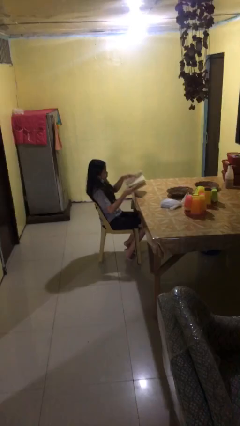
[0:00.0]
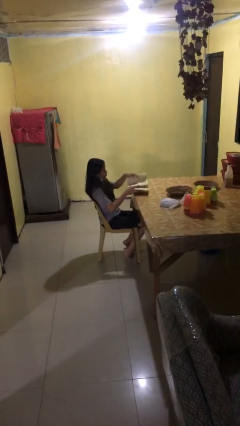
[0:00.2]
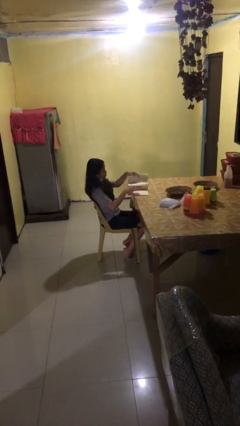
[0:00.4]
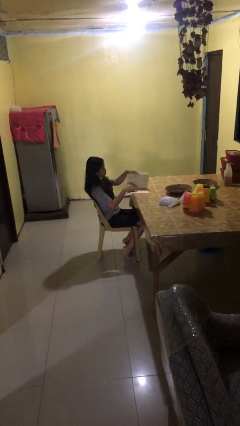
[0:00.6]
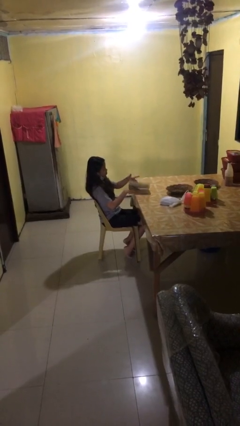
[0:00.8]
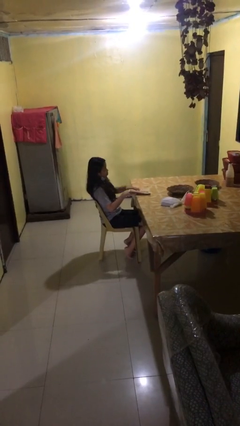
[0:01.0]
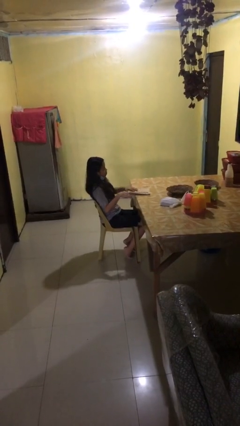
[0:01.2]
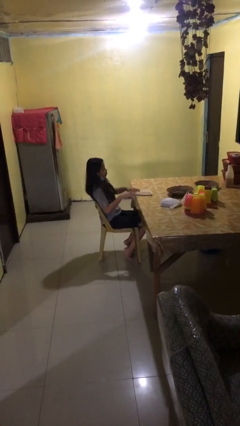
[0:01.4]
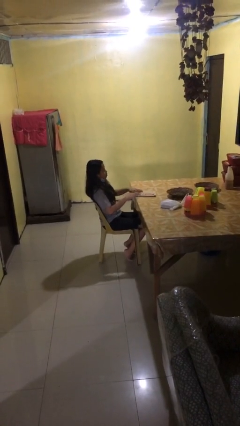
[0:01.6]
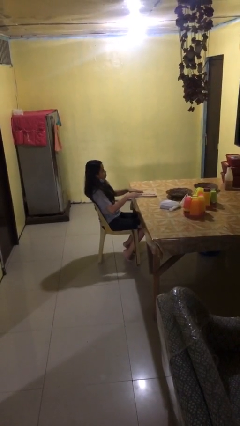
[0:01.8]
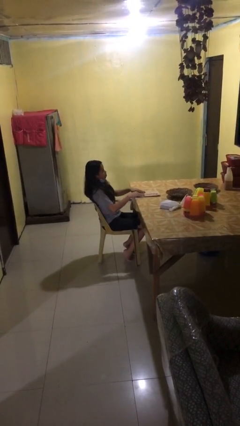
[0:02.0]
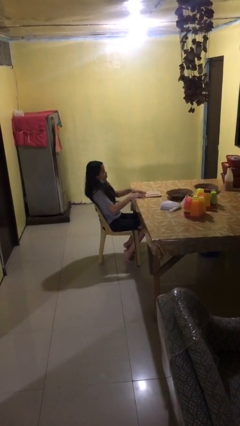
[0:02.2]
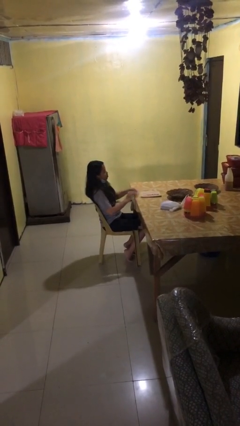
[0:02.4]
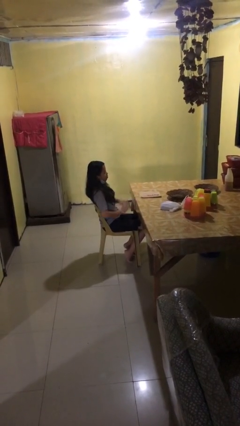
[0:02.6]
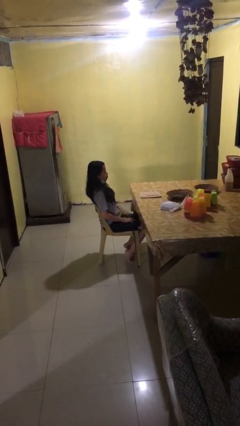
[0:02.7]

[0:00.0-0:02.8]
person puts down object on table

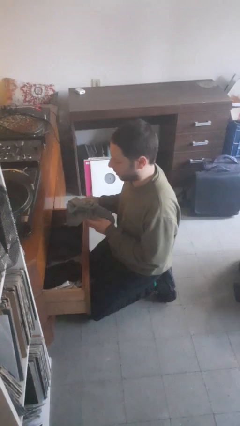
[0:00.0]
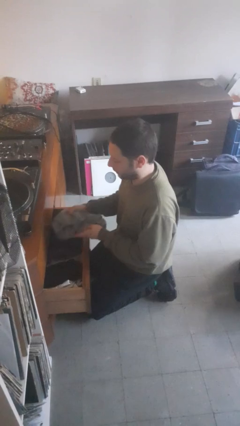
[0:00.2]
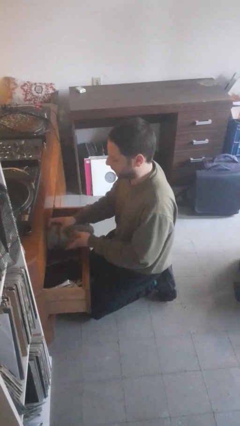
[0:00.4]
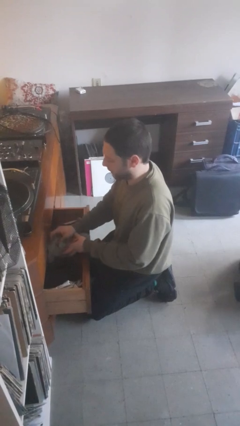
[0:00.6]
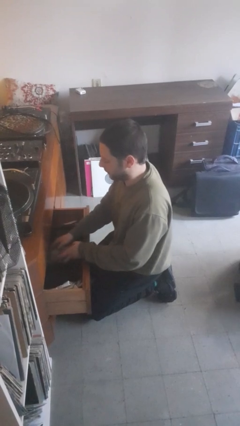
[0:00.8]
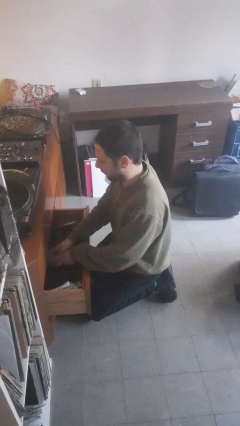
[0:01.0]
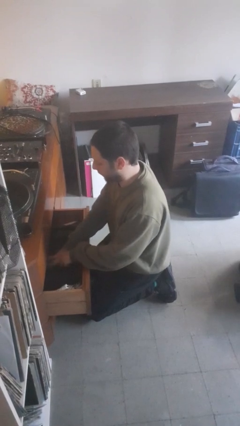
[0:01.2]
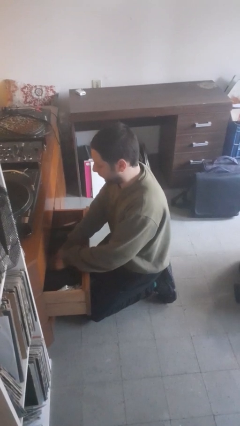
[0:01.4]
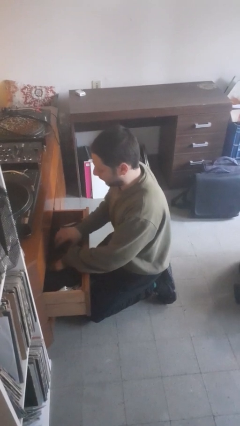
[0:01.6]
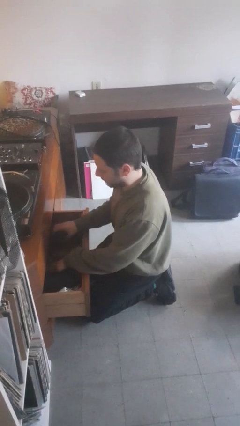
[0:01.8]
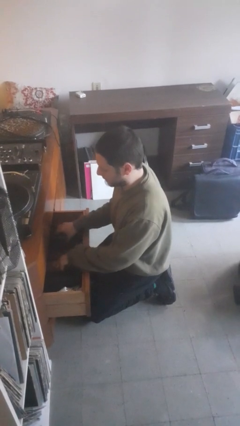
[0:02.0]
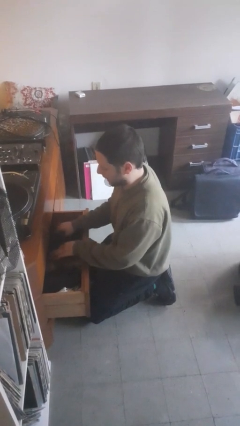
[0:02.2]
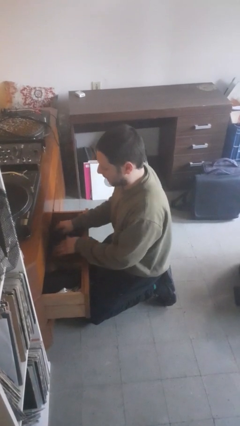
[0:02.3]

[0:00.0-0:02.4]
person puts clothes into dresser

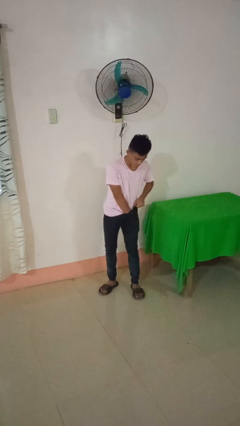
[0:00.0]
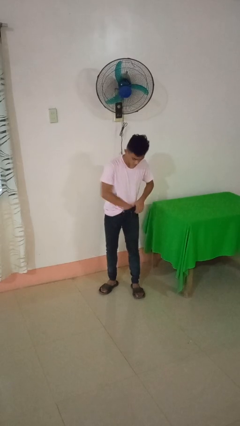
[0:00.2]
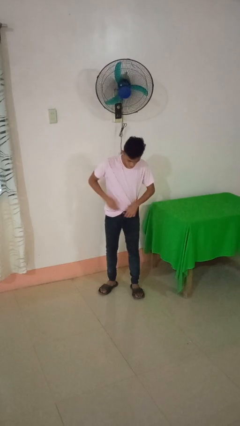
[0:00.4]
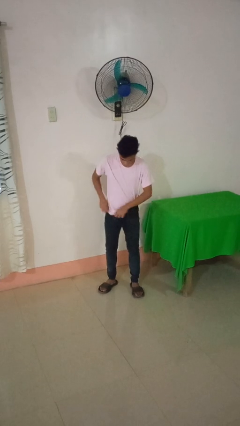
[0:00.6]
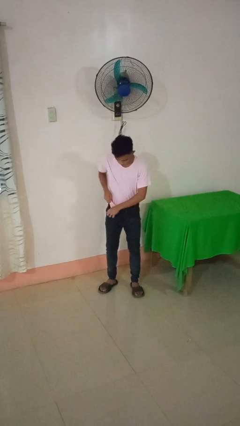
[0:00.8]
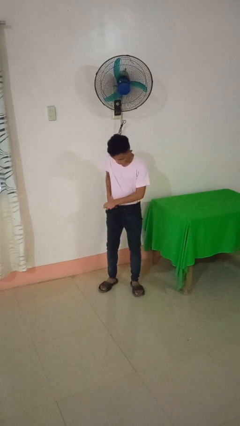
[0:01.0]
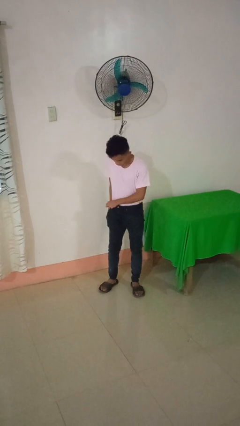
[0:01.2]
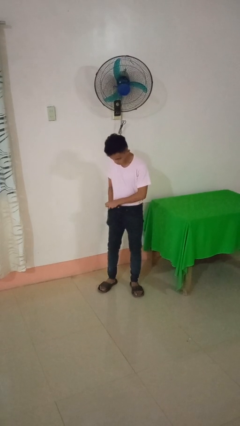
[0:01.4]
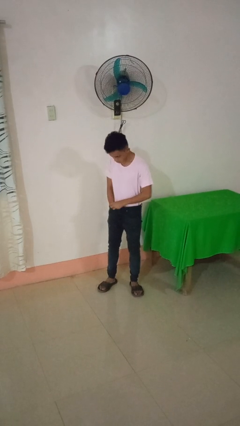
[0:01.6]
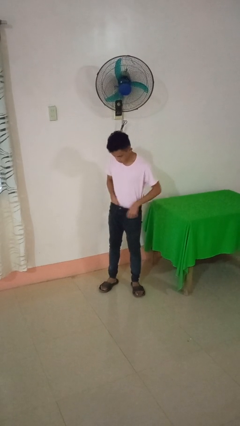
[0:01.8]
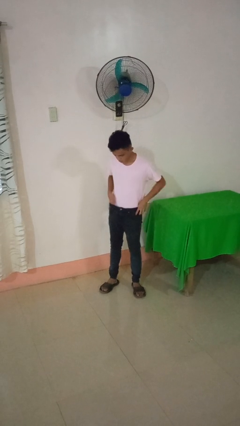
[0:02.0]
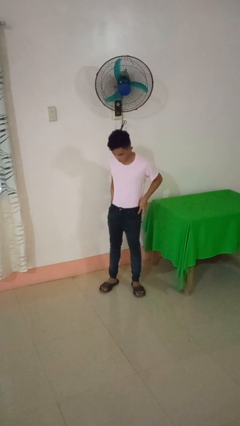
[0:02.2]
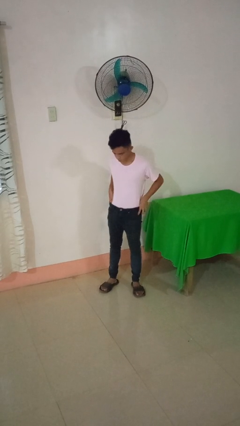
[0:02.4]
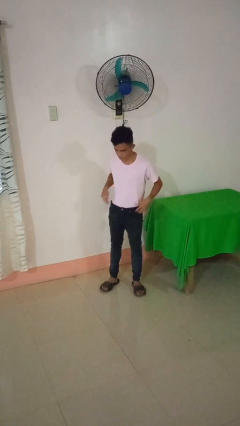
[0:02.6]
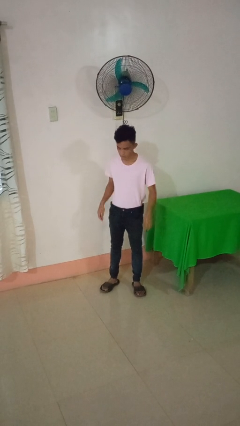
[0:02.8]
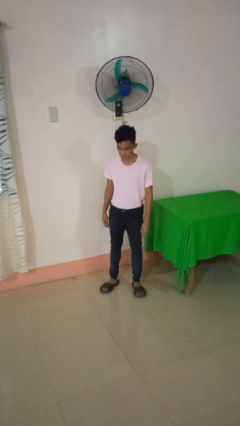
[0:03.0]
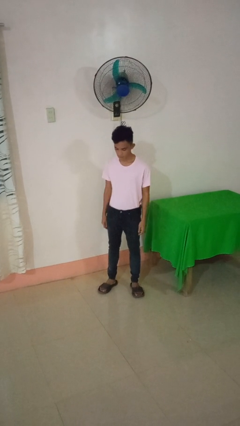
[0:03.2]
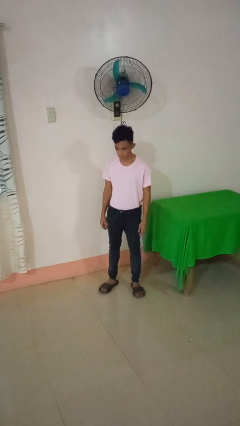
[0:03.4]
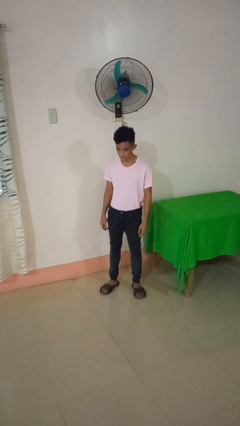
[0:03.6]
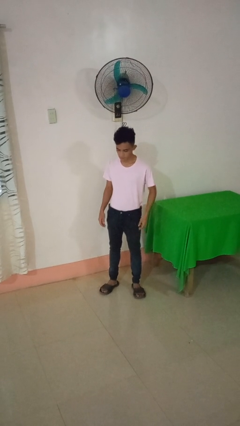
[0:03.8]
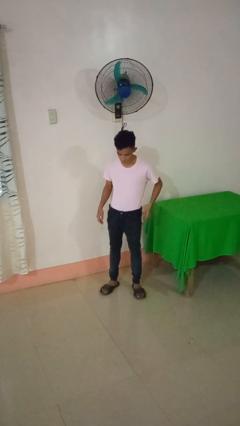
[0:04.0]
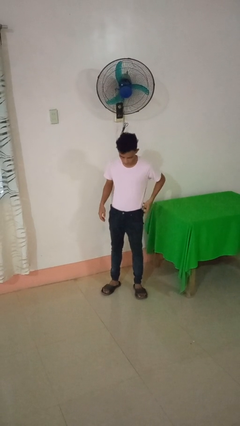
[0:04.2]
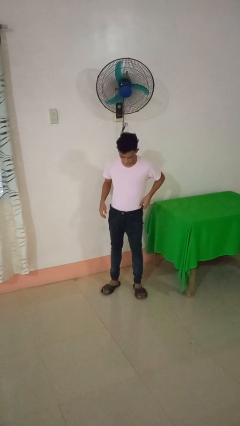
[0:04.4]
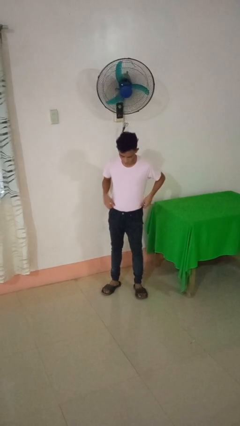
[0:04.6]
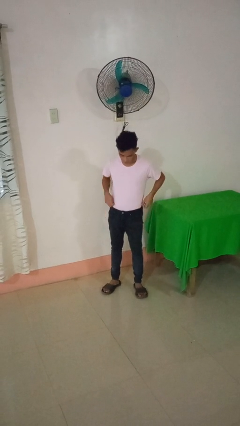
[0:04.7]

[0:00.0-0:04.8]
person tucks in shirt

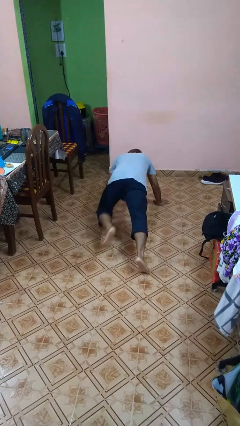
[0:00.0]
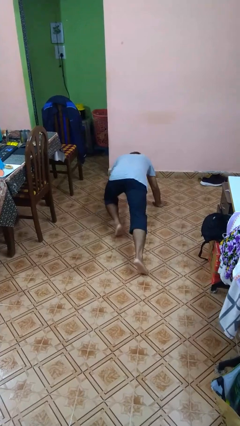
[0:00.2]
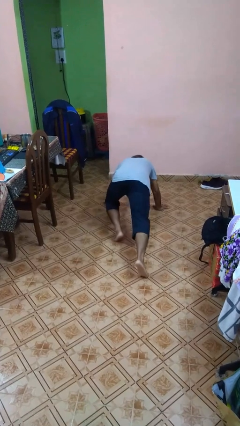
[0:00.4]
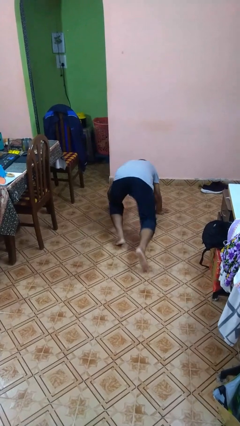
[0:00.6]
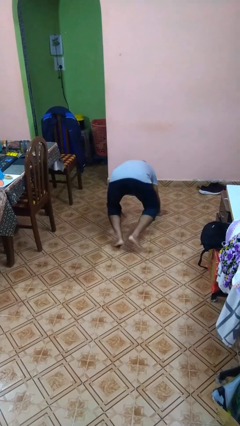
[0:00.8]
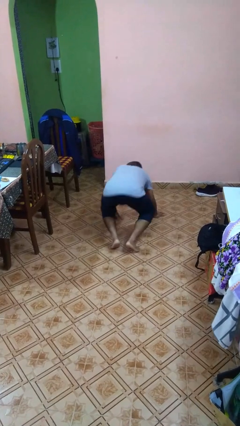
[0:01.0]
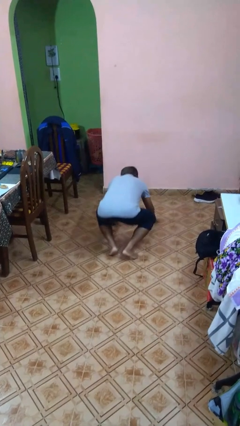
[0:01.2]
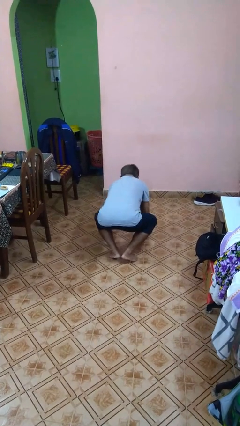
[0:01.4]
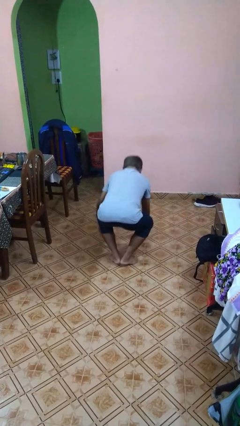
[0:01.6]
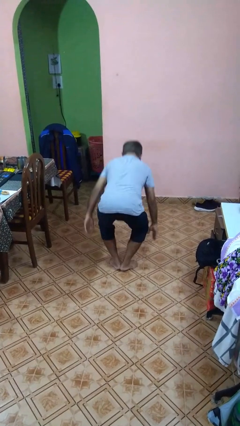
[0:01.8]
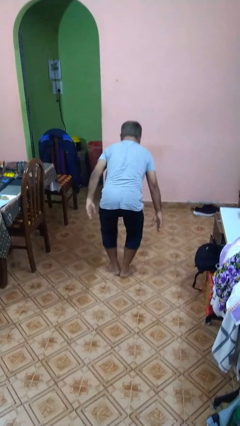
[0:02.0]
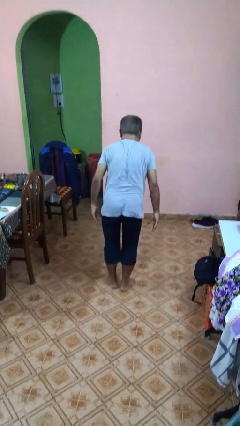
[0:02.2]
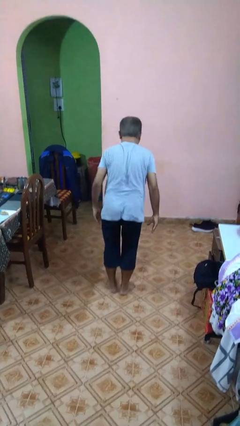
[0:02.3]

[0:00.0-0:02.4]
person stands up from floor

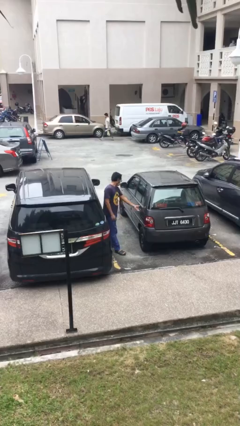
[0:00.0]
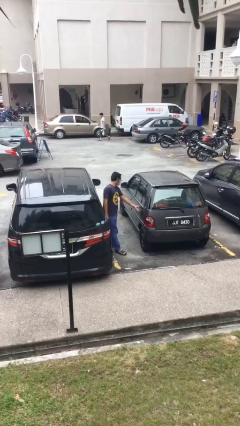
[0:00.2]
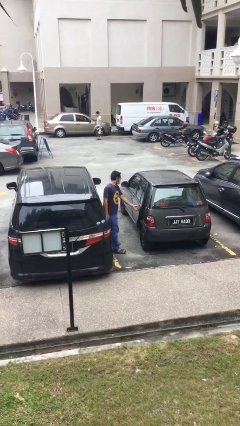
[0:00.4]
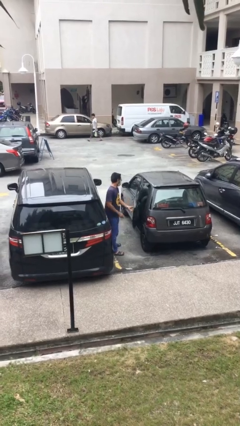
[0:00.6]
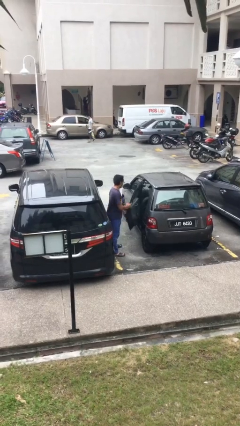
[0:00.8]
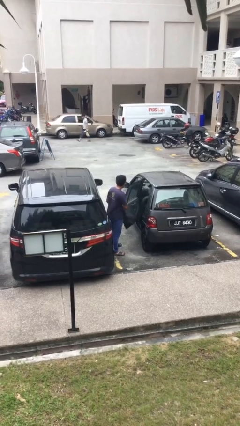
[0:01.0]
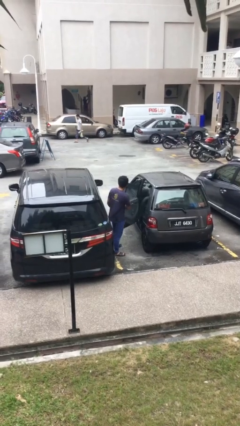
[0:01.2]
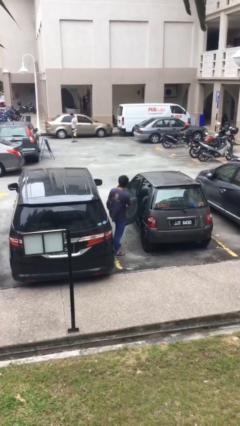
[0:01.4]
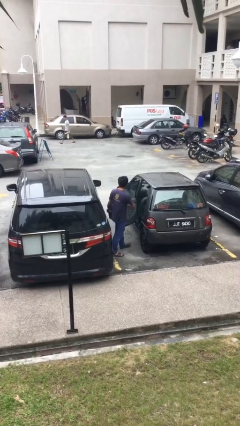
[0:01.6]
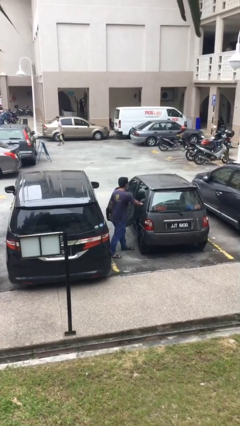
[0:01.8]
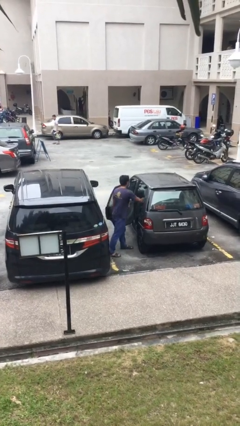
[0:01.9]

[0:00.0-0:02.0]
person opens car door

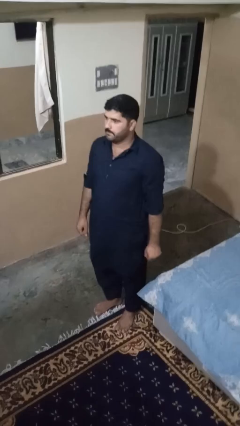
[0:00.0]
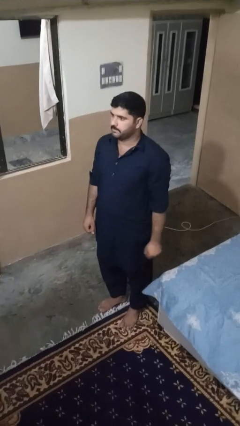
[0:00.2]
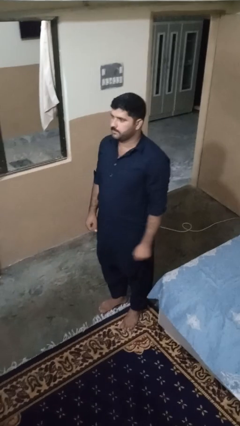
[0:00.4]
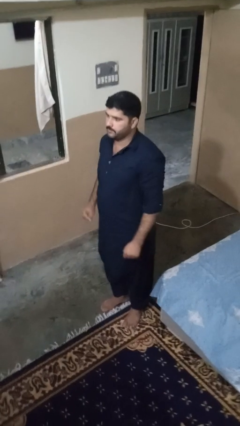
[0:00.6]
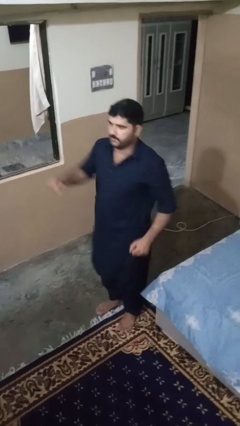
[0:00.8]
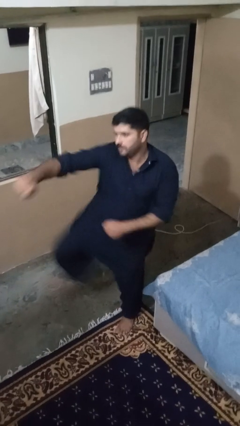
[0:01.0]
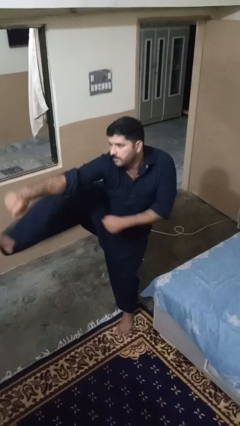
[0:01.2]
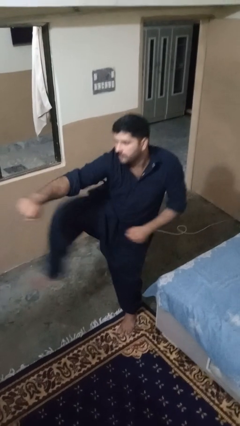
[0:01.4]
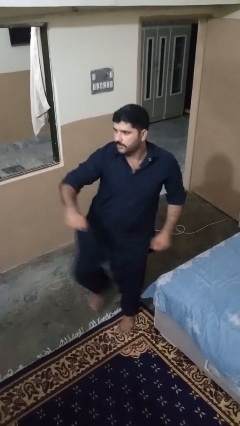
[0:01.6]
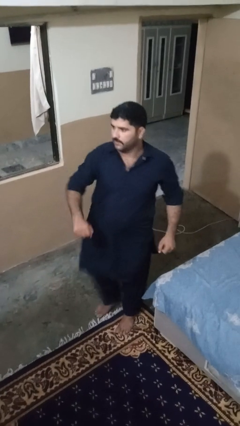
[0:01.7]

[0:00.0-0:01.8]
person karate chop

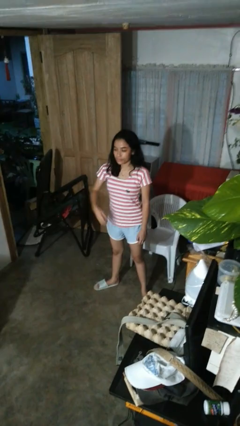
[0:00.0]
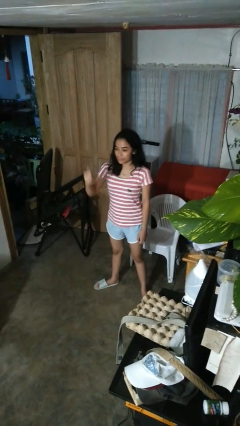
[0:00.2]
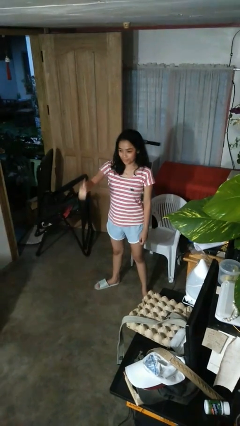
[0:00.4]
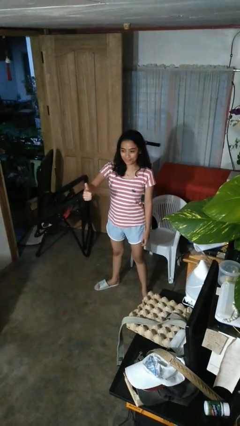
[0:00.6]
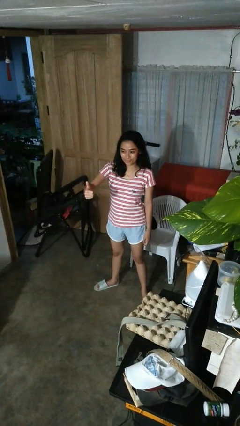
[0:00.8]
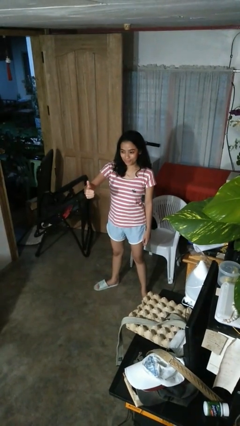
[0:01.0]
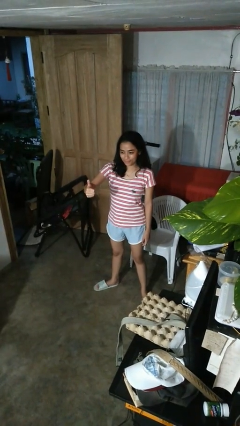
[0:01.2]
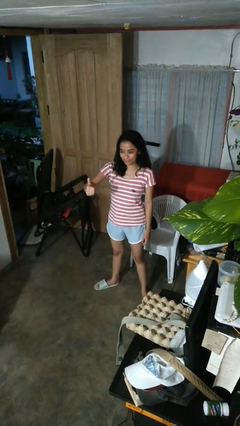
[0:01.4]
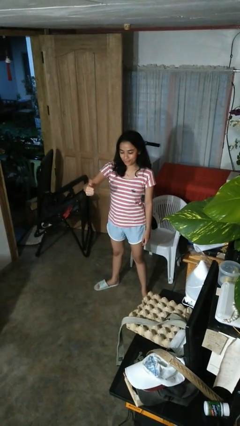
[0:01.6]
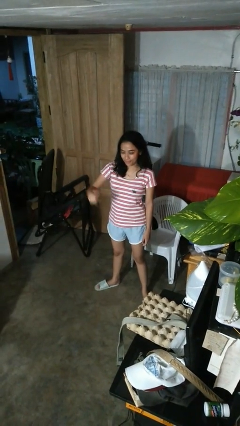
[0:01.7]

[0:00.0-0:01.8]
person gestures thumbs up
